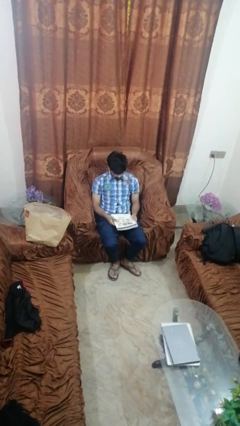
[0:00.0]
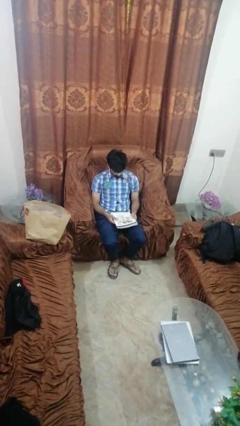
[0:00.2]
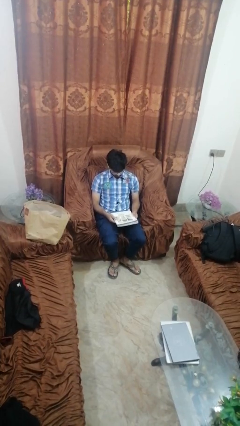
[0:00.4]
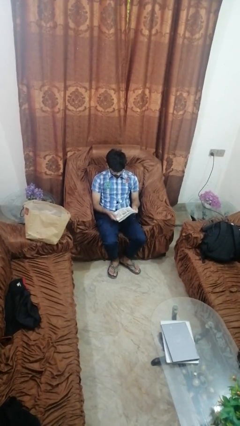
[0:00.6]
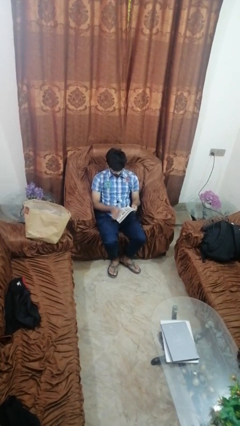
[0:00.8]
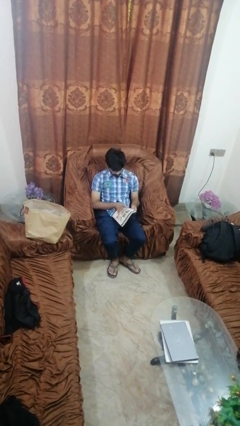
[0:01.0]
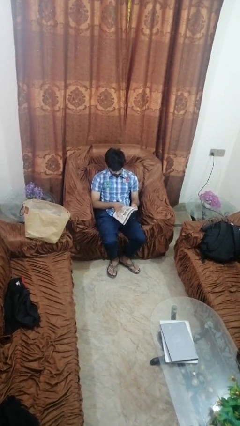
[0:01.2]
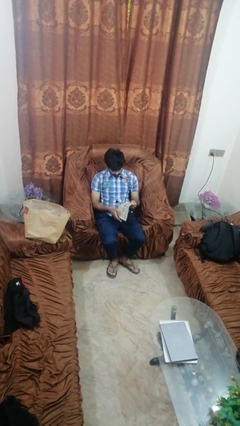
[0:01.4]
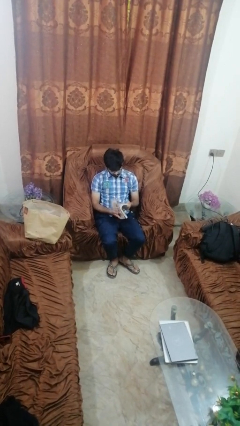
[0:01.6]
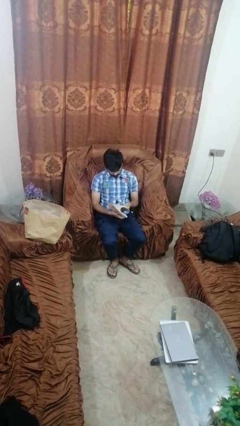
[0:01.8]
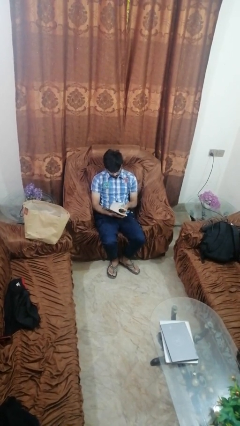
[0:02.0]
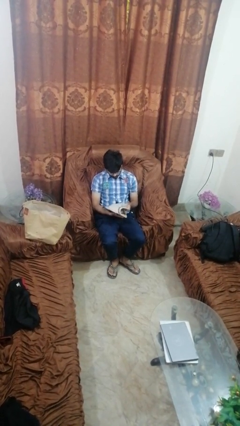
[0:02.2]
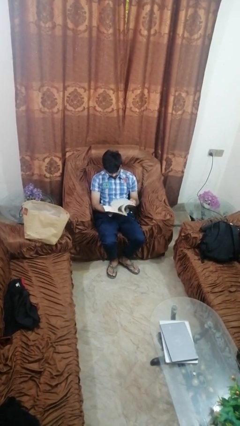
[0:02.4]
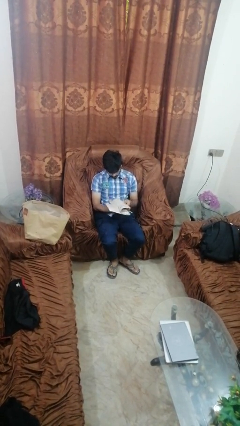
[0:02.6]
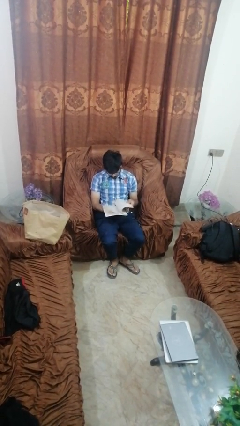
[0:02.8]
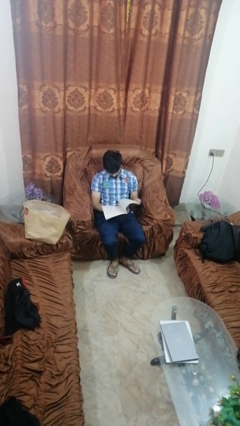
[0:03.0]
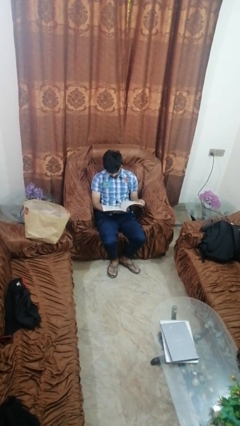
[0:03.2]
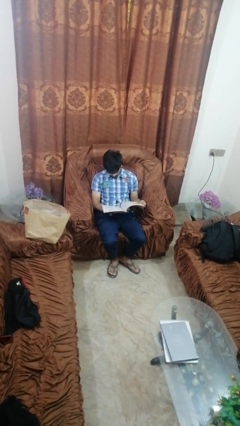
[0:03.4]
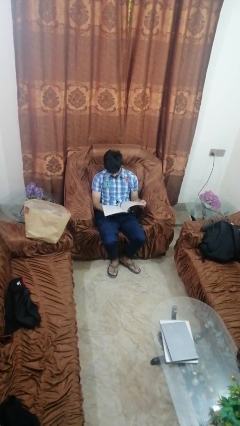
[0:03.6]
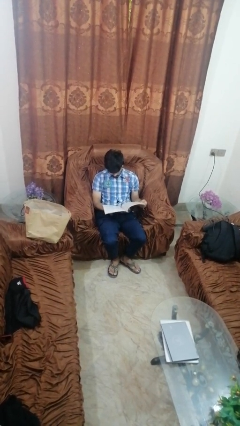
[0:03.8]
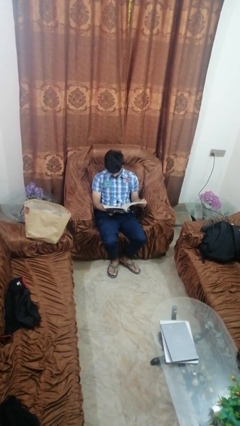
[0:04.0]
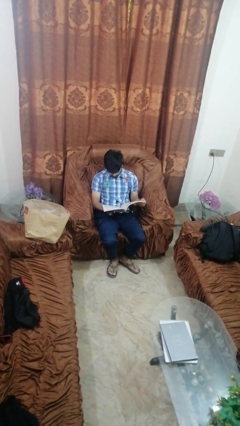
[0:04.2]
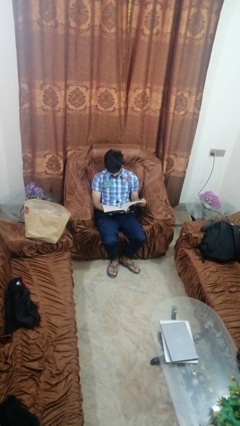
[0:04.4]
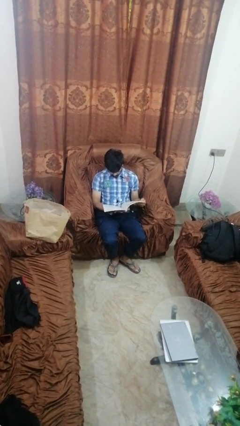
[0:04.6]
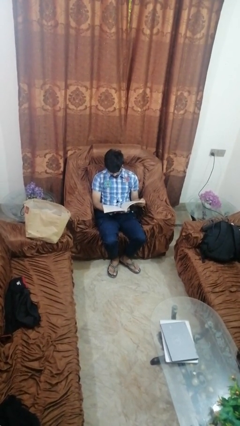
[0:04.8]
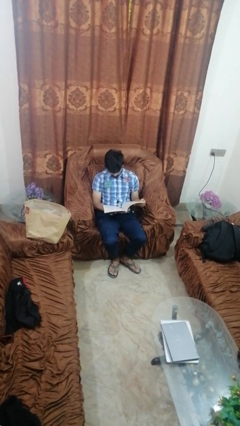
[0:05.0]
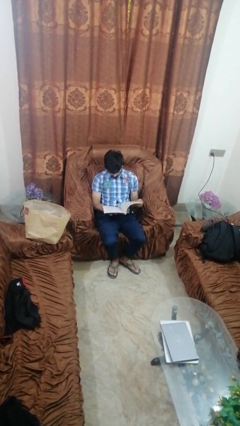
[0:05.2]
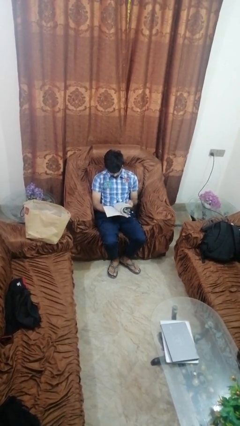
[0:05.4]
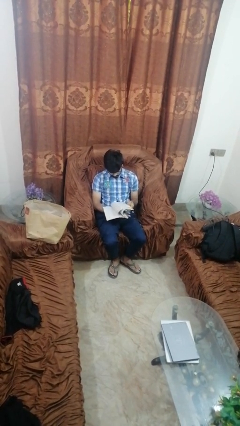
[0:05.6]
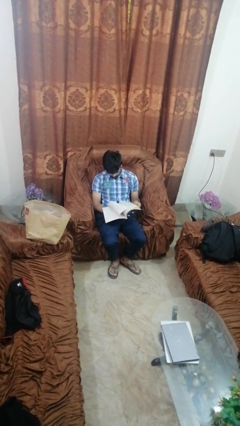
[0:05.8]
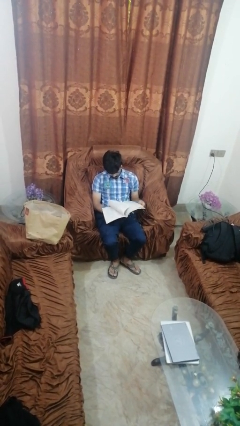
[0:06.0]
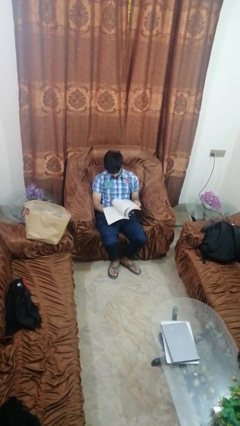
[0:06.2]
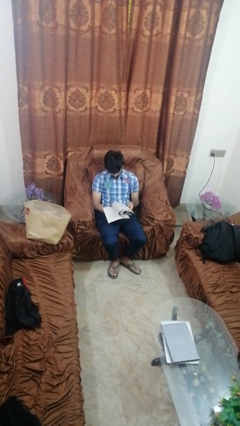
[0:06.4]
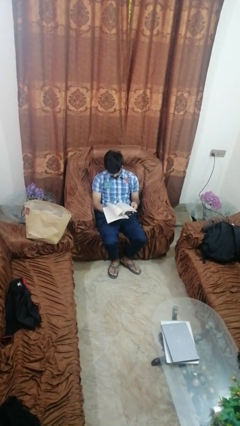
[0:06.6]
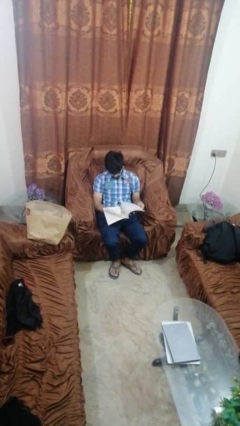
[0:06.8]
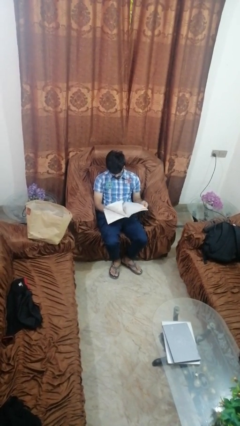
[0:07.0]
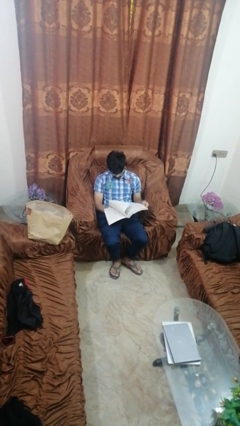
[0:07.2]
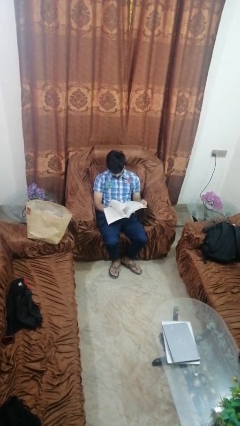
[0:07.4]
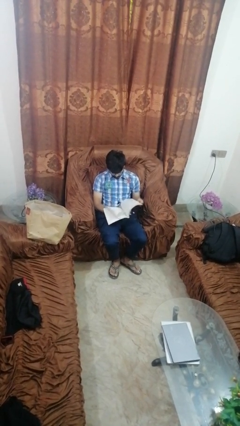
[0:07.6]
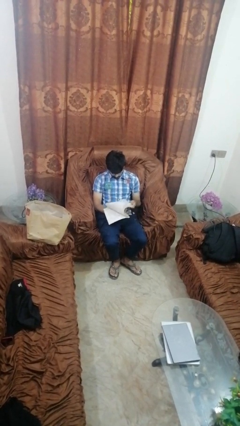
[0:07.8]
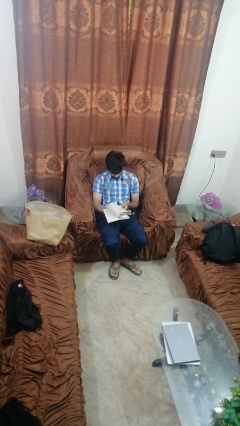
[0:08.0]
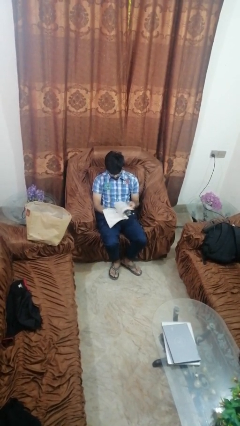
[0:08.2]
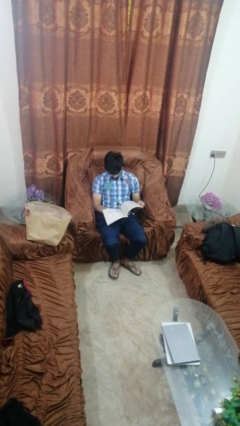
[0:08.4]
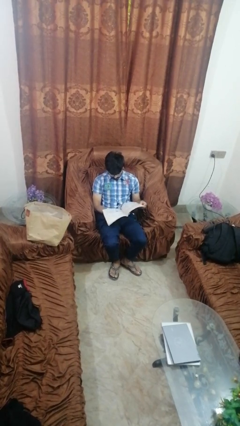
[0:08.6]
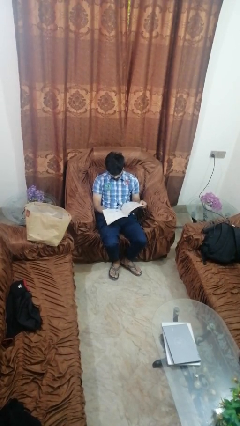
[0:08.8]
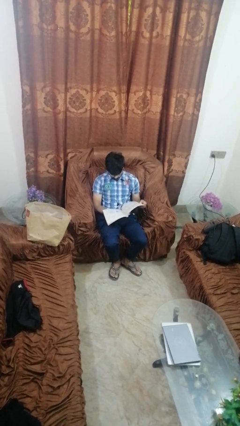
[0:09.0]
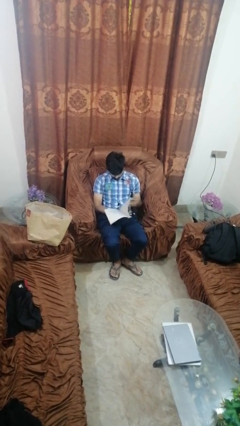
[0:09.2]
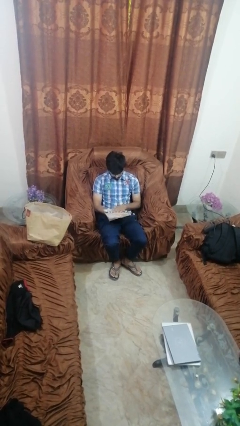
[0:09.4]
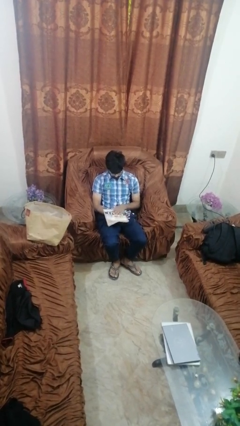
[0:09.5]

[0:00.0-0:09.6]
person reads magazine

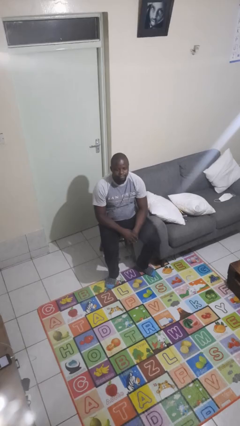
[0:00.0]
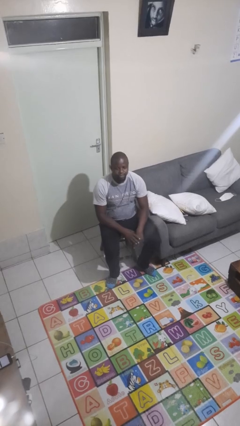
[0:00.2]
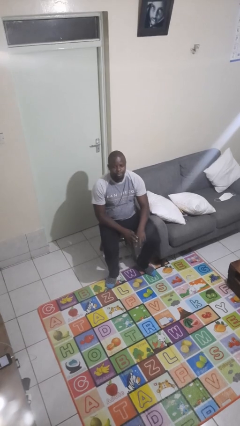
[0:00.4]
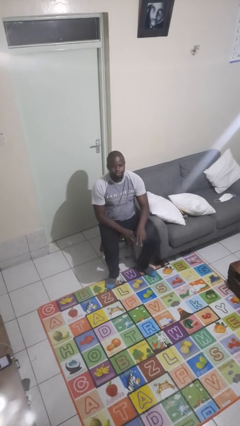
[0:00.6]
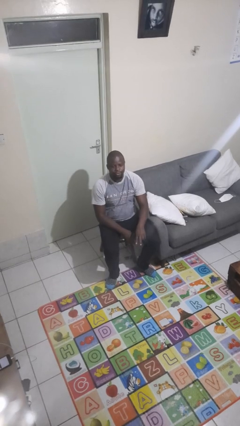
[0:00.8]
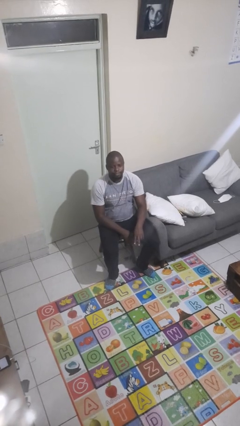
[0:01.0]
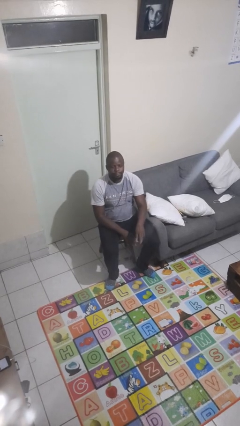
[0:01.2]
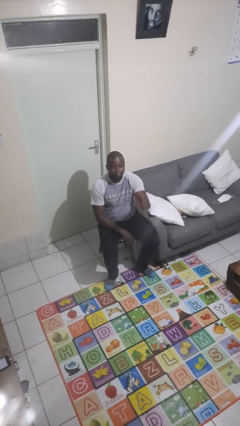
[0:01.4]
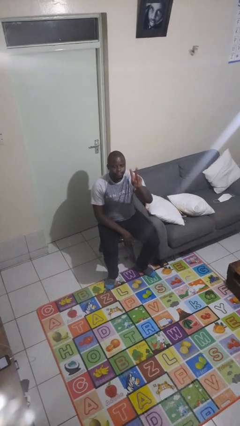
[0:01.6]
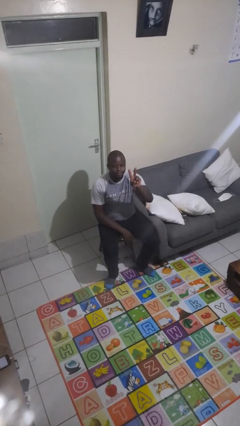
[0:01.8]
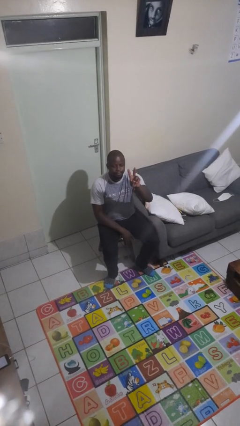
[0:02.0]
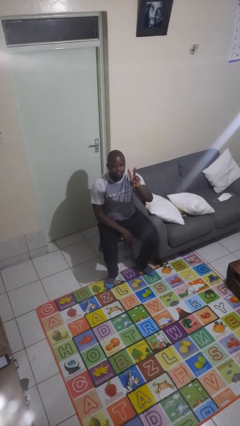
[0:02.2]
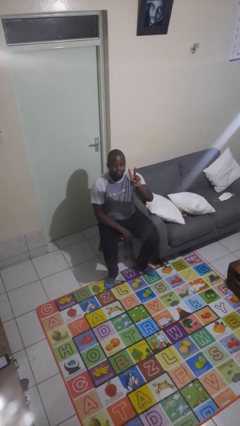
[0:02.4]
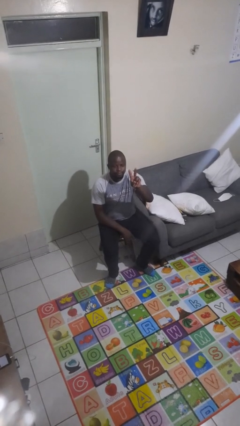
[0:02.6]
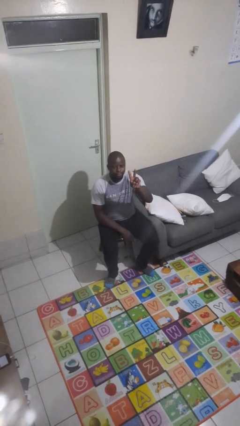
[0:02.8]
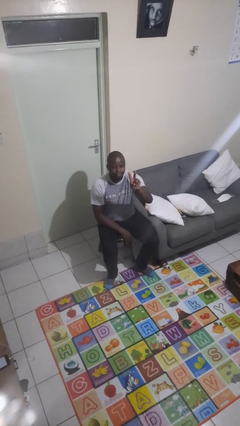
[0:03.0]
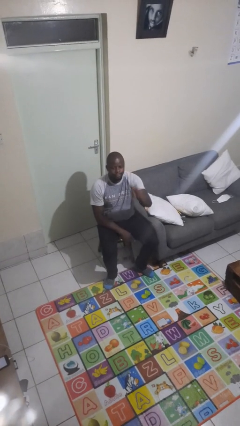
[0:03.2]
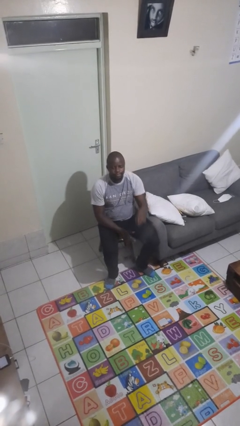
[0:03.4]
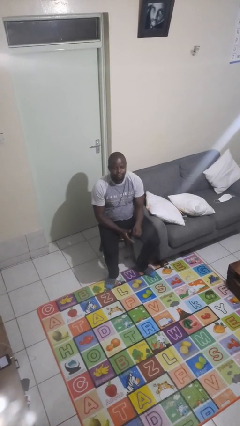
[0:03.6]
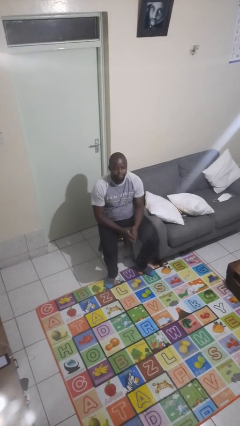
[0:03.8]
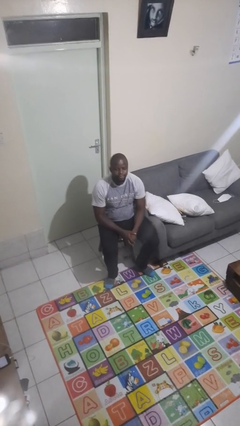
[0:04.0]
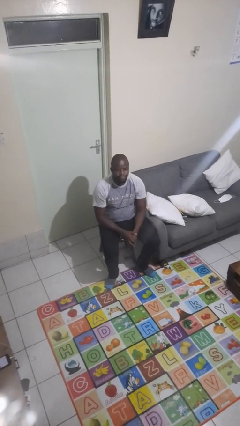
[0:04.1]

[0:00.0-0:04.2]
person gestures peace

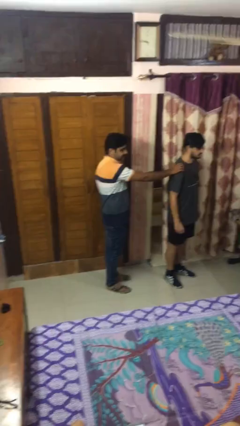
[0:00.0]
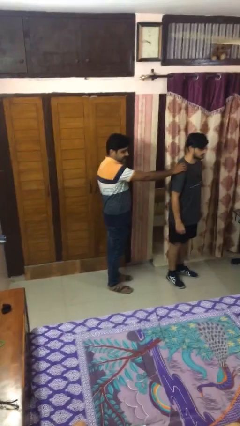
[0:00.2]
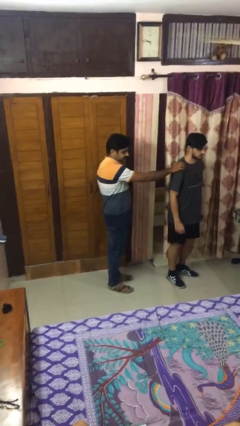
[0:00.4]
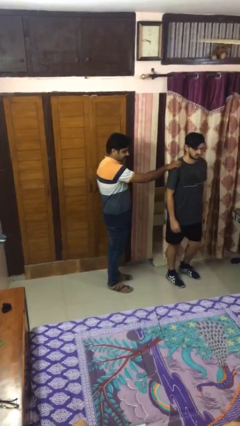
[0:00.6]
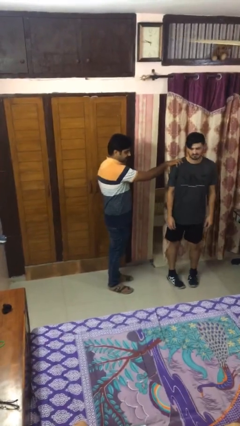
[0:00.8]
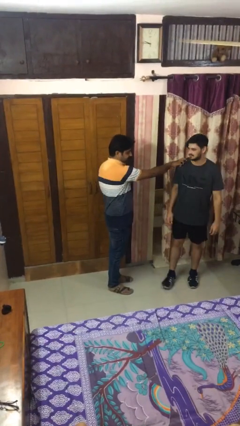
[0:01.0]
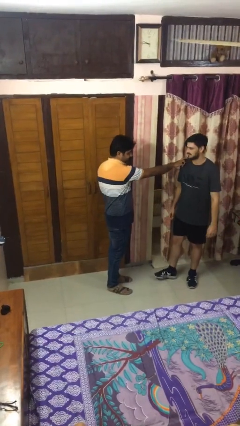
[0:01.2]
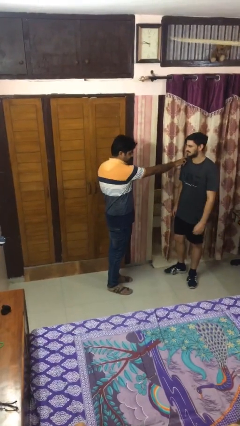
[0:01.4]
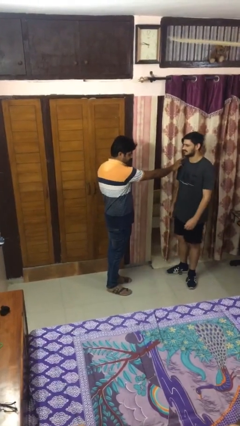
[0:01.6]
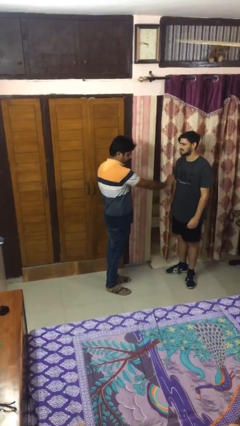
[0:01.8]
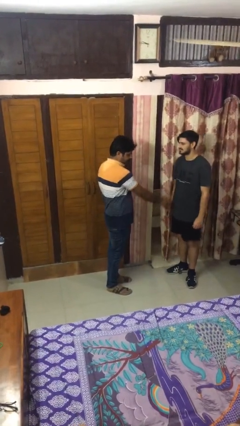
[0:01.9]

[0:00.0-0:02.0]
person spins person around

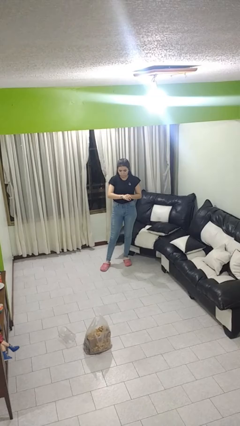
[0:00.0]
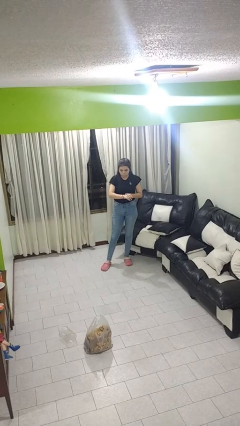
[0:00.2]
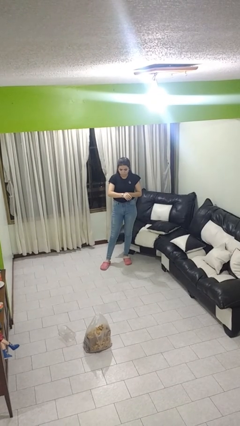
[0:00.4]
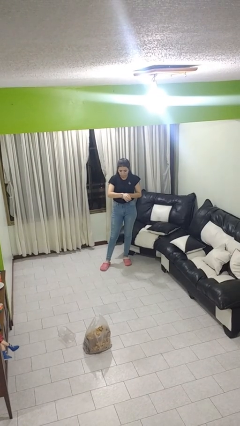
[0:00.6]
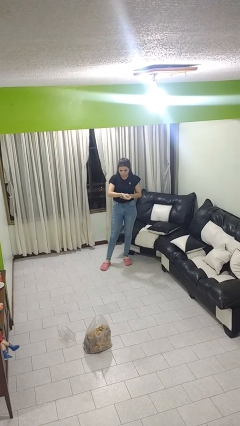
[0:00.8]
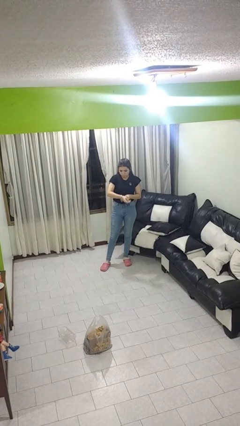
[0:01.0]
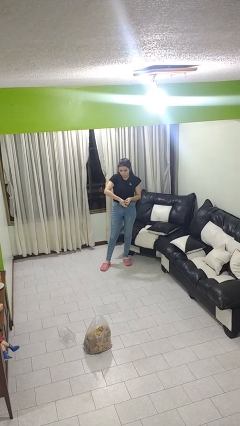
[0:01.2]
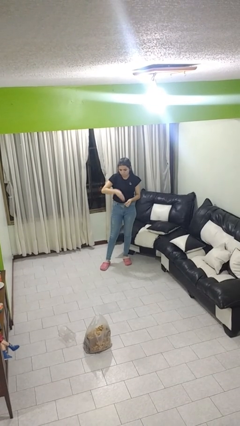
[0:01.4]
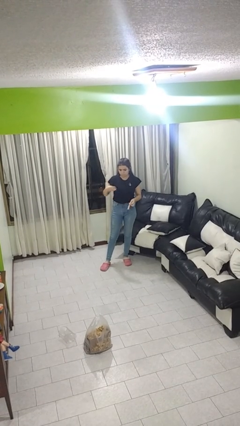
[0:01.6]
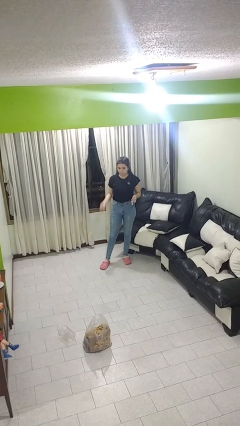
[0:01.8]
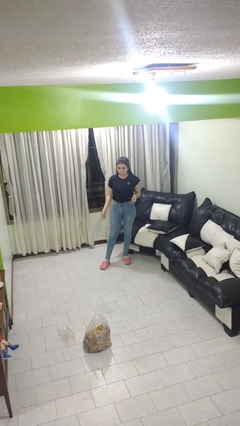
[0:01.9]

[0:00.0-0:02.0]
person takes off wristwatch
